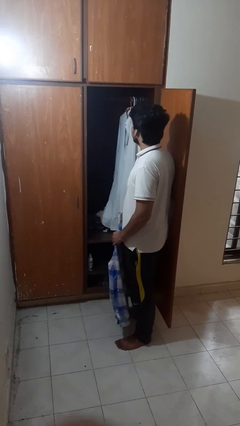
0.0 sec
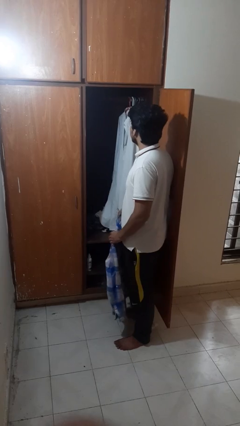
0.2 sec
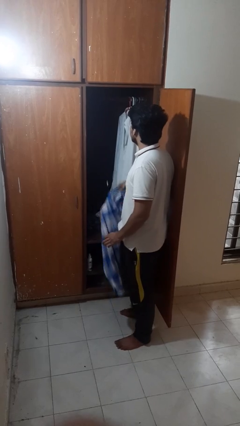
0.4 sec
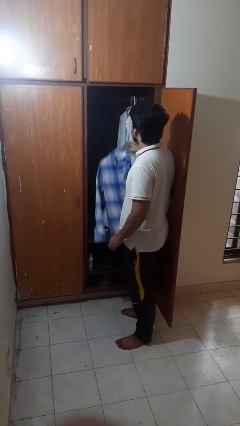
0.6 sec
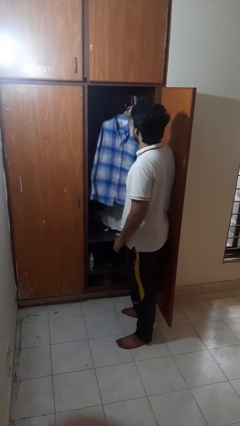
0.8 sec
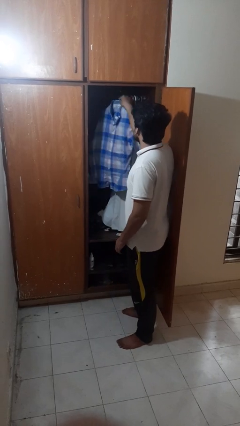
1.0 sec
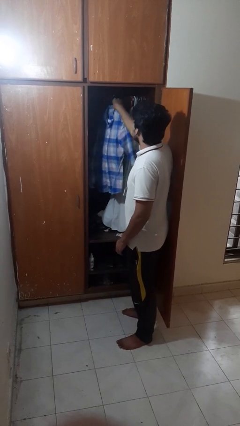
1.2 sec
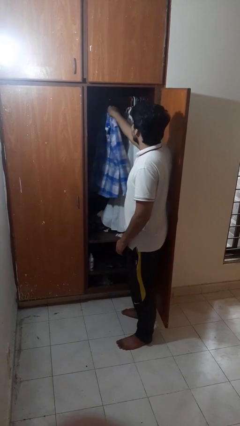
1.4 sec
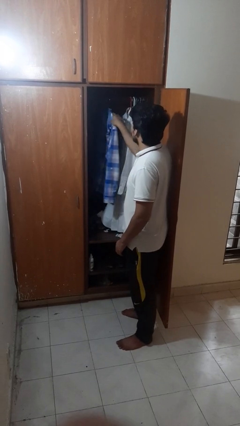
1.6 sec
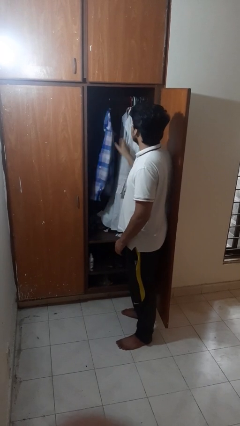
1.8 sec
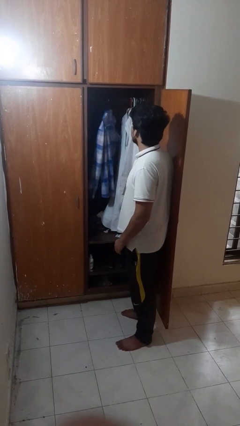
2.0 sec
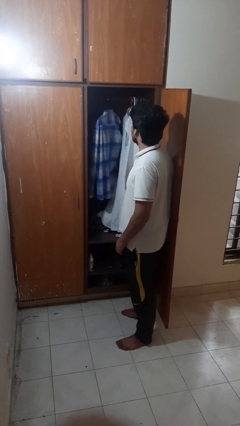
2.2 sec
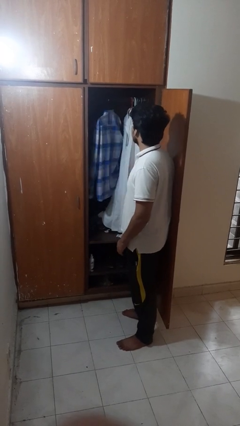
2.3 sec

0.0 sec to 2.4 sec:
person puts clothes into closet

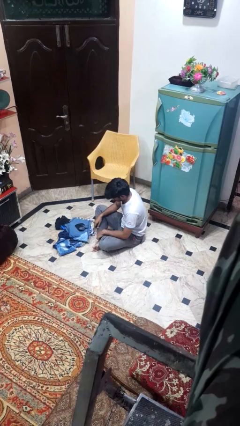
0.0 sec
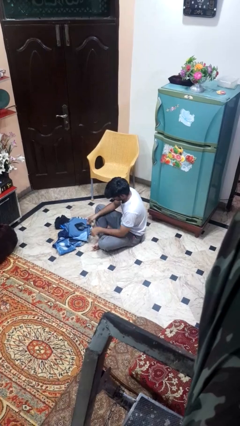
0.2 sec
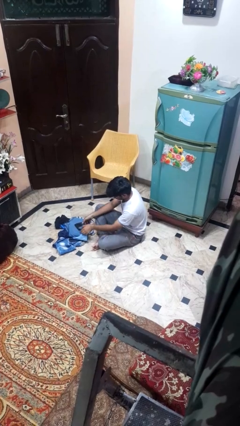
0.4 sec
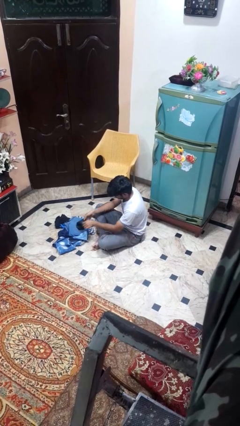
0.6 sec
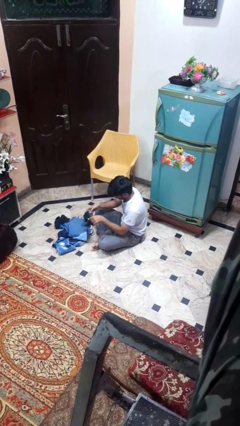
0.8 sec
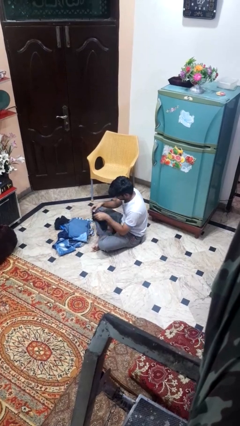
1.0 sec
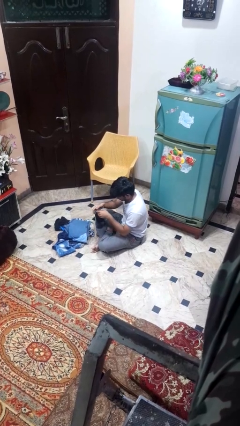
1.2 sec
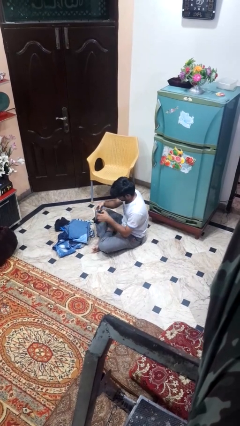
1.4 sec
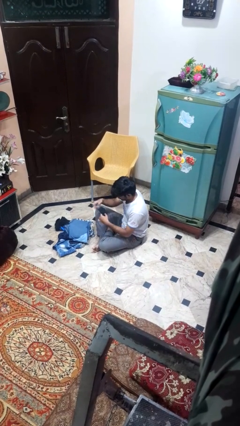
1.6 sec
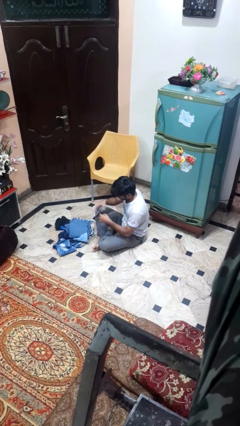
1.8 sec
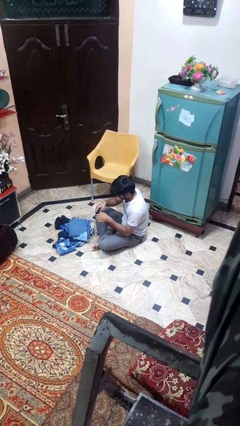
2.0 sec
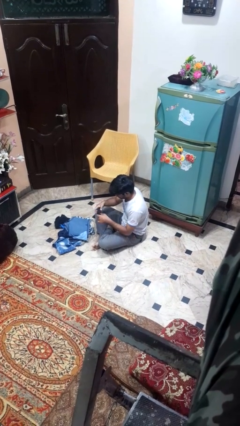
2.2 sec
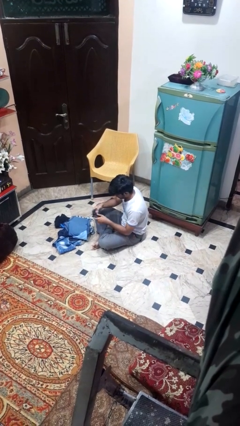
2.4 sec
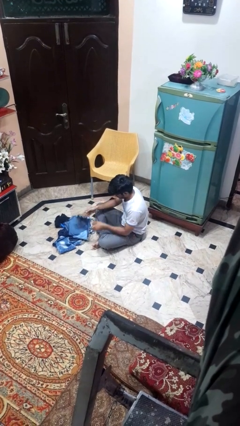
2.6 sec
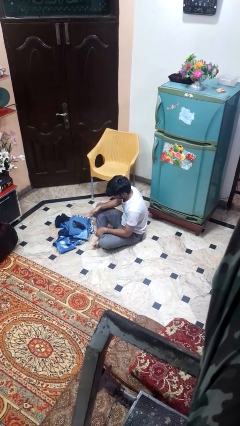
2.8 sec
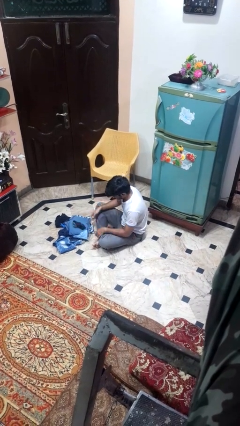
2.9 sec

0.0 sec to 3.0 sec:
person folds socks

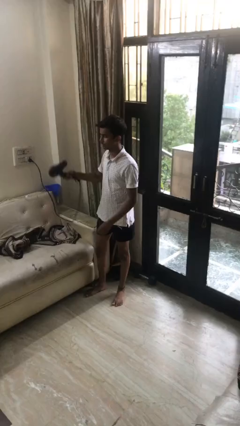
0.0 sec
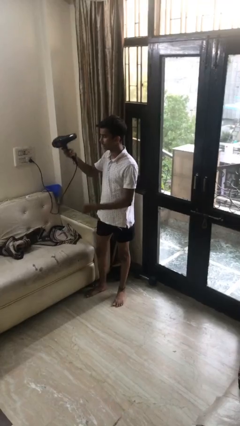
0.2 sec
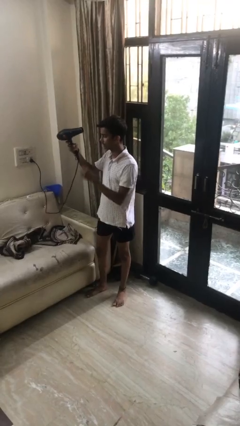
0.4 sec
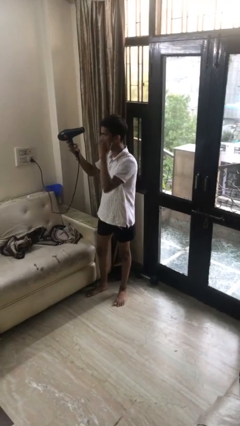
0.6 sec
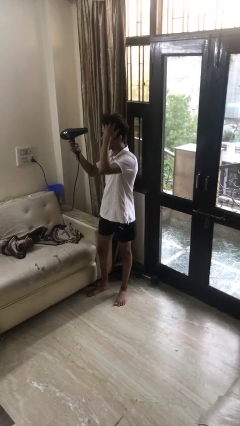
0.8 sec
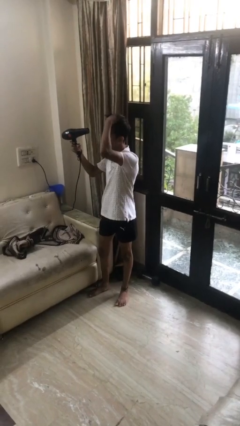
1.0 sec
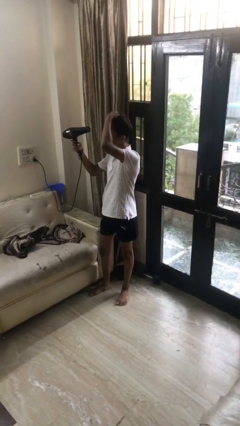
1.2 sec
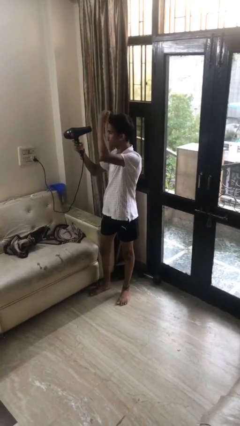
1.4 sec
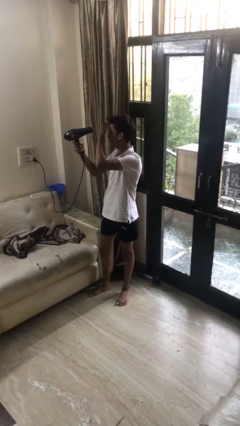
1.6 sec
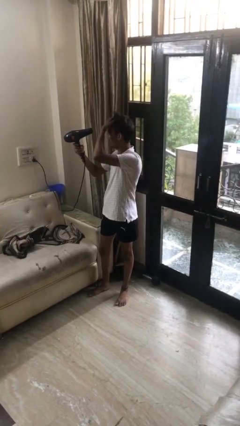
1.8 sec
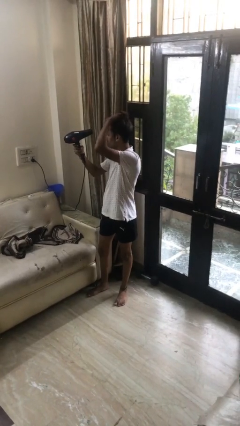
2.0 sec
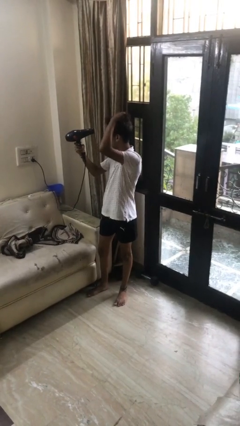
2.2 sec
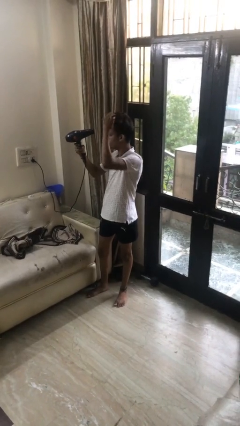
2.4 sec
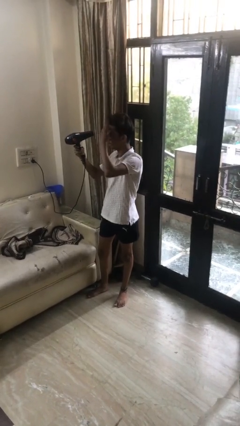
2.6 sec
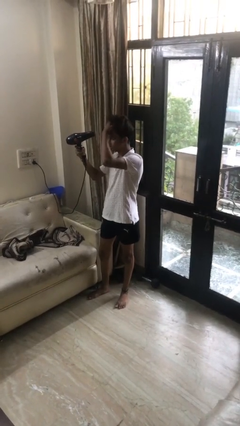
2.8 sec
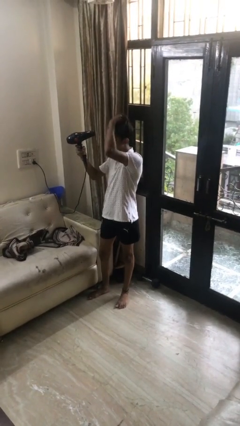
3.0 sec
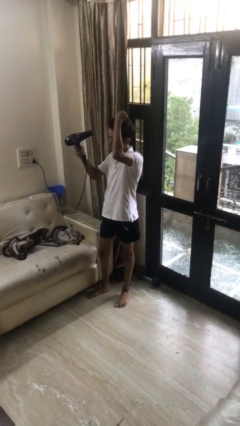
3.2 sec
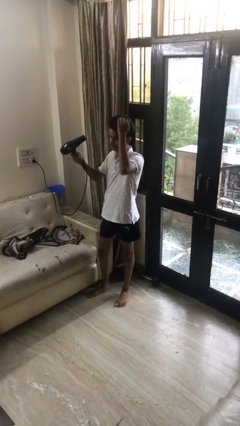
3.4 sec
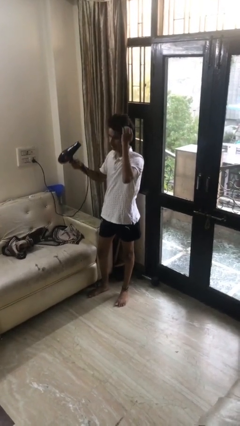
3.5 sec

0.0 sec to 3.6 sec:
person dries hair with hairdryer

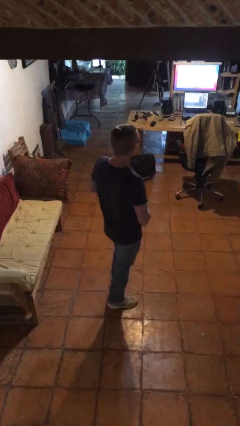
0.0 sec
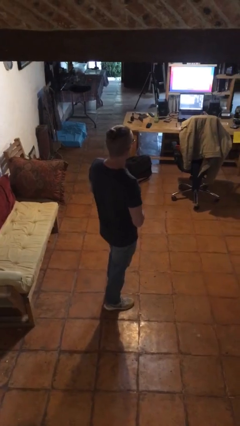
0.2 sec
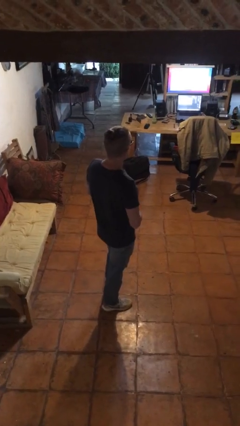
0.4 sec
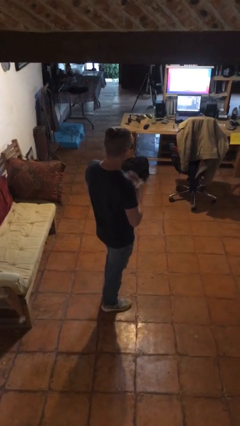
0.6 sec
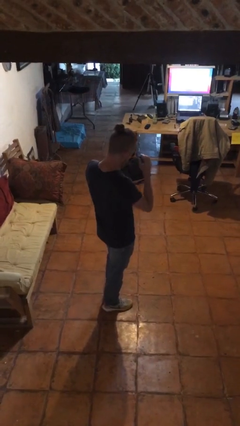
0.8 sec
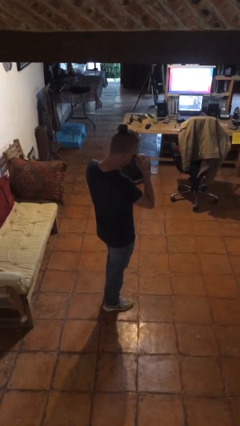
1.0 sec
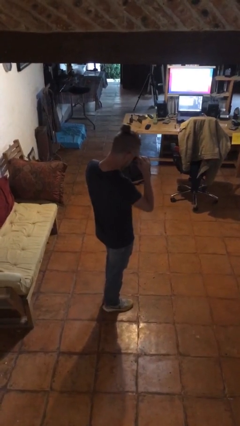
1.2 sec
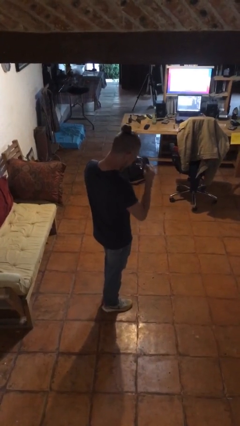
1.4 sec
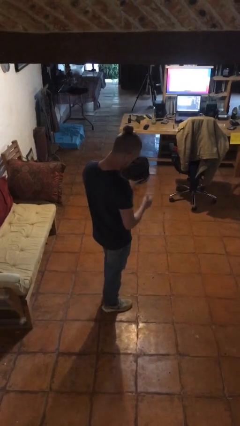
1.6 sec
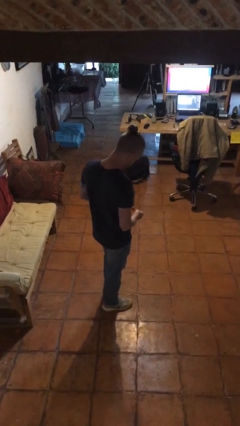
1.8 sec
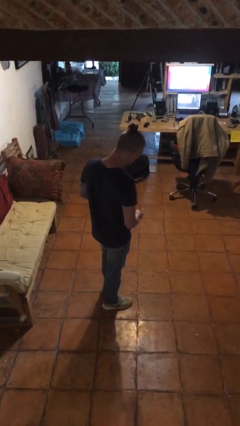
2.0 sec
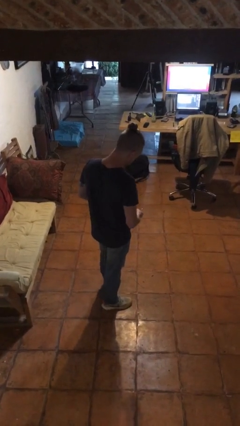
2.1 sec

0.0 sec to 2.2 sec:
person takes off sunglasses

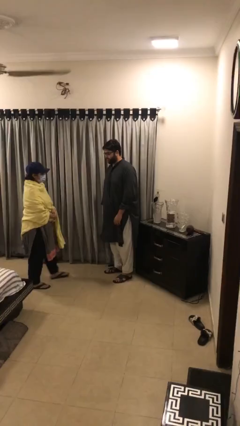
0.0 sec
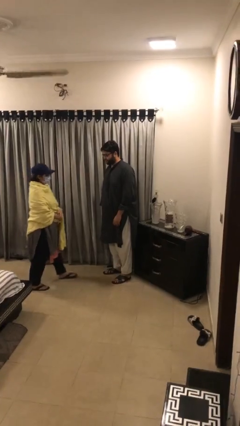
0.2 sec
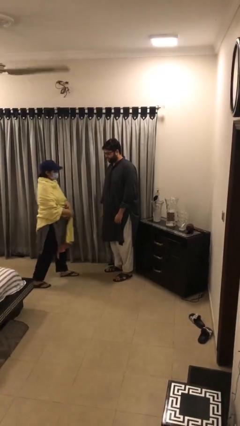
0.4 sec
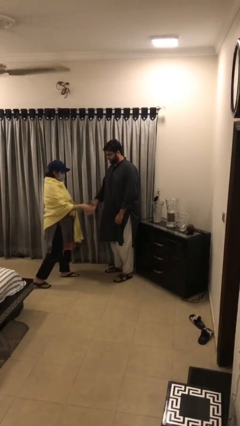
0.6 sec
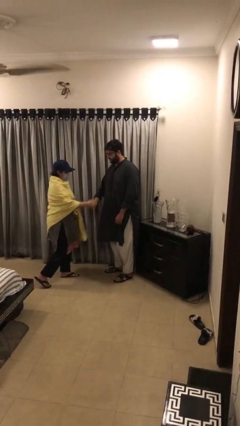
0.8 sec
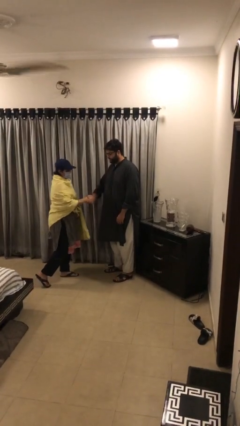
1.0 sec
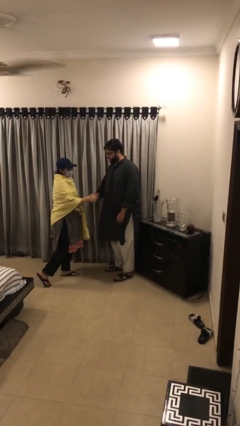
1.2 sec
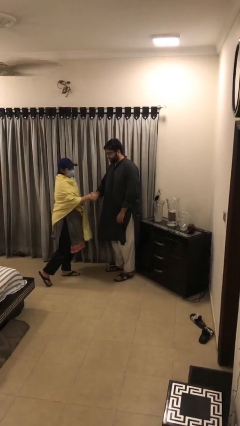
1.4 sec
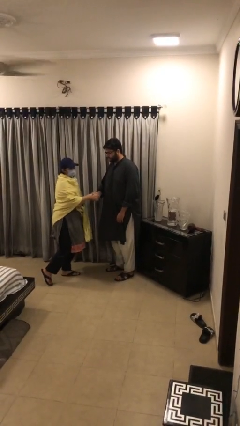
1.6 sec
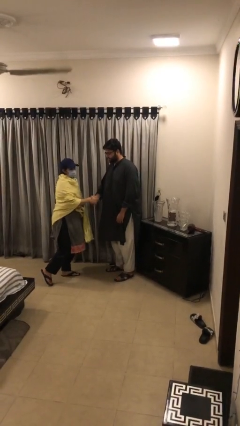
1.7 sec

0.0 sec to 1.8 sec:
person shakes hand

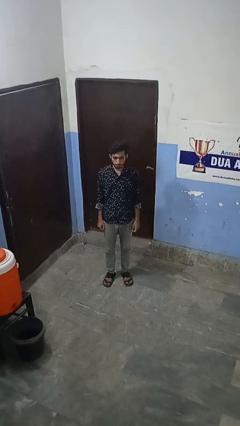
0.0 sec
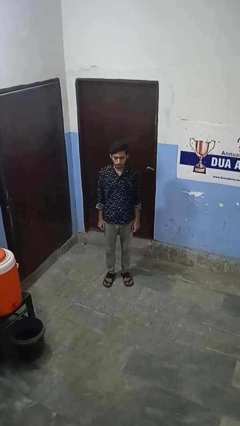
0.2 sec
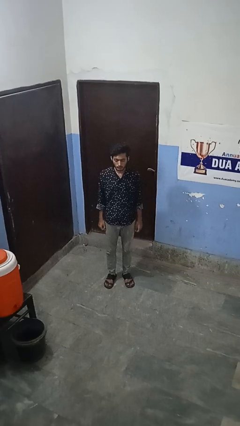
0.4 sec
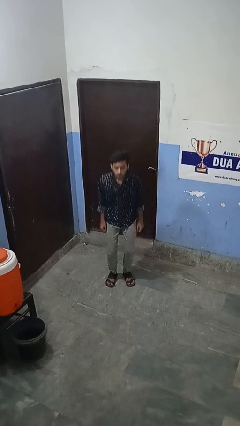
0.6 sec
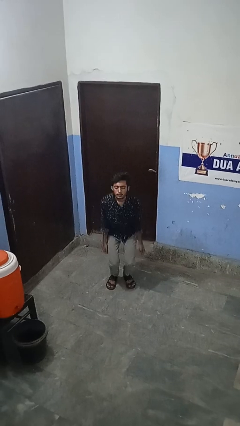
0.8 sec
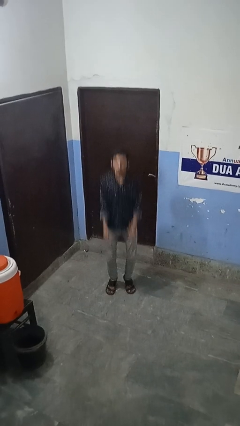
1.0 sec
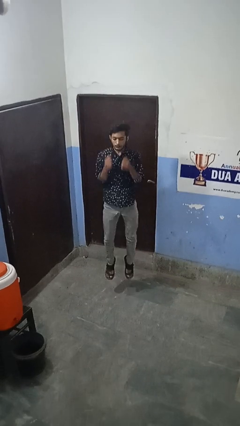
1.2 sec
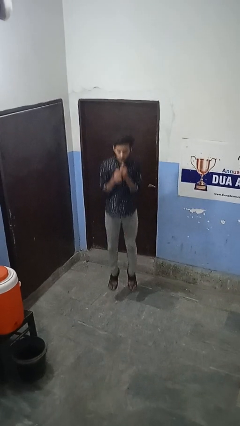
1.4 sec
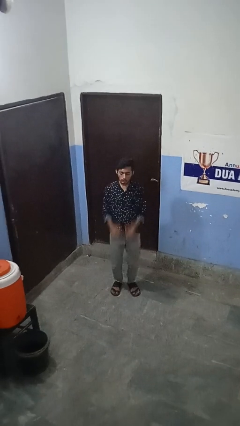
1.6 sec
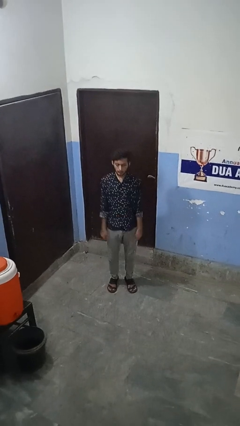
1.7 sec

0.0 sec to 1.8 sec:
person jumps

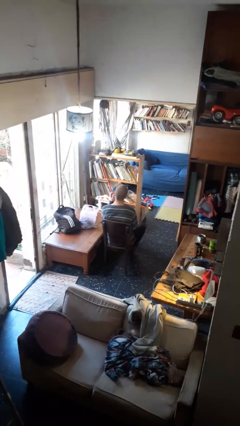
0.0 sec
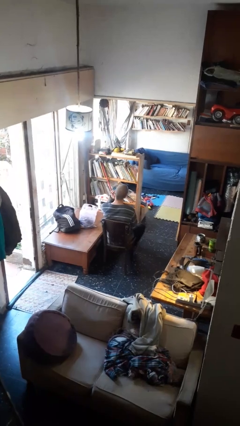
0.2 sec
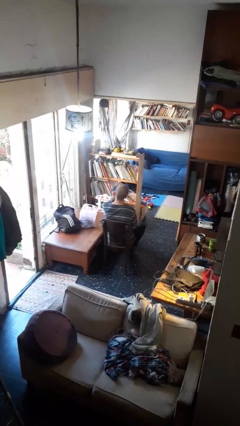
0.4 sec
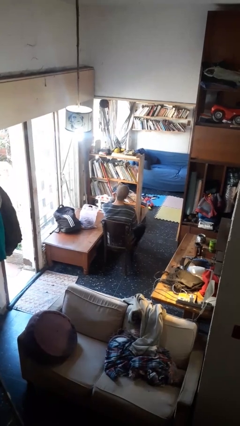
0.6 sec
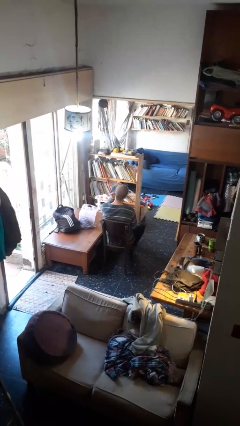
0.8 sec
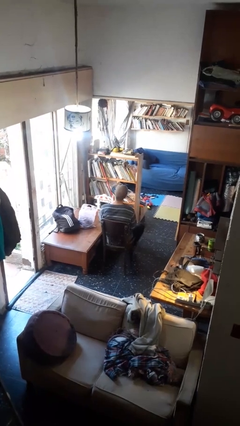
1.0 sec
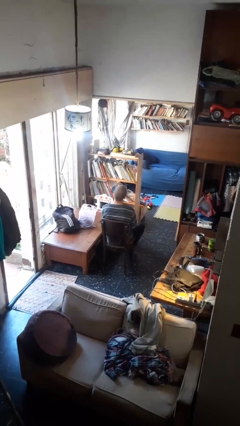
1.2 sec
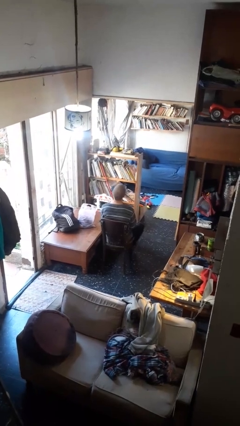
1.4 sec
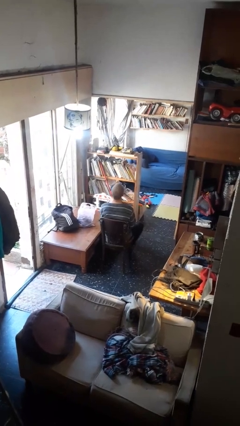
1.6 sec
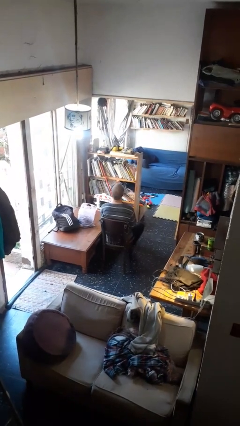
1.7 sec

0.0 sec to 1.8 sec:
person takes off earrings

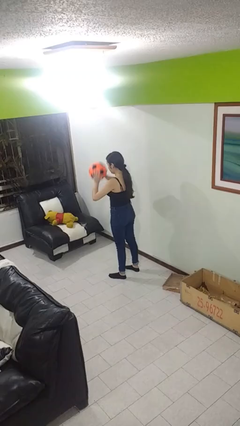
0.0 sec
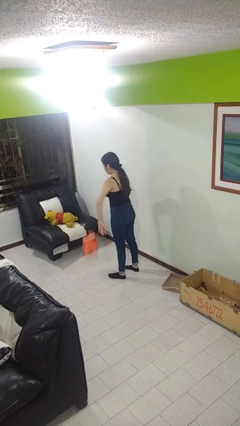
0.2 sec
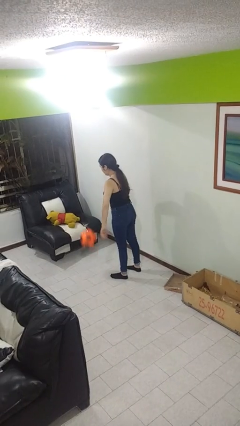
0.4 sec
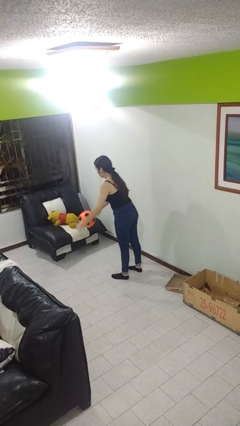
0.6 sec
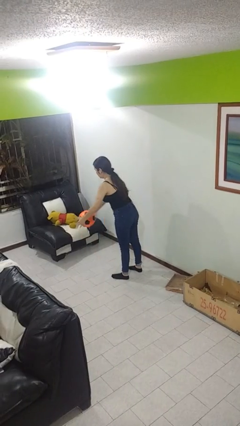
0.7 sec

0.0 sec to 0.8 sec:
person bounces ball on floor
